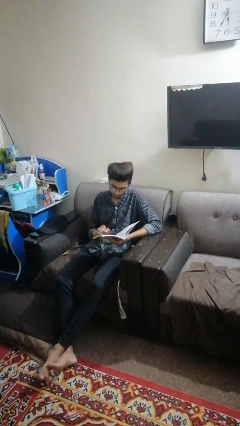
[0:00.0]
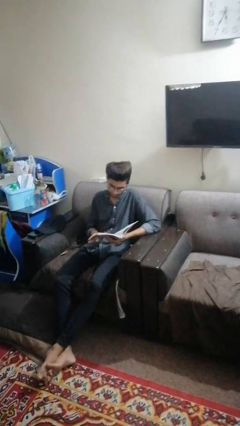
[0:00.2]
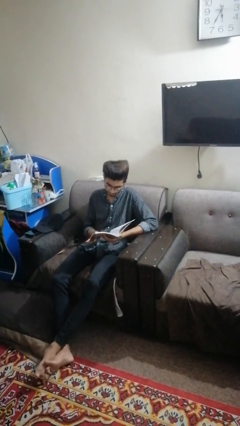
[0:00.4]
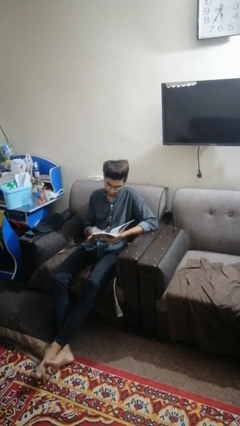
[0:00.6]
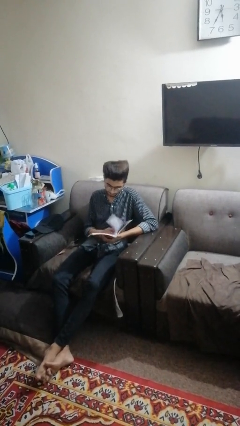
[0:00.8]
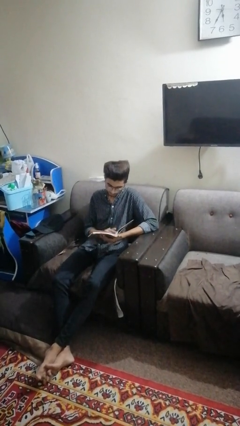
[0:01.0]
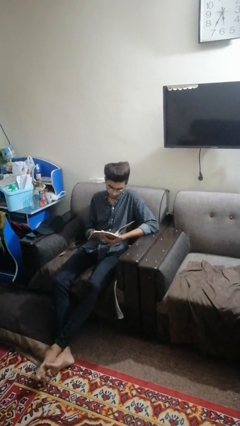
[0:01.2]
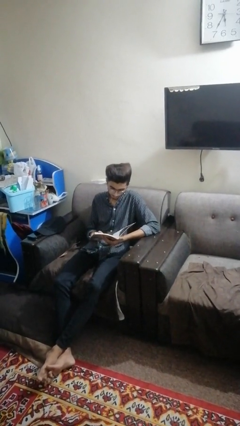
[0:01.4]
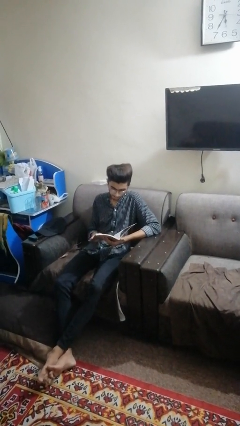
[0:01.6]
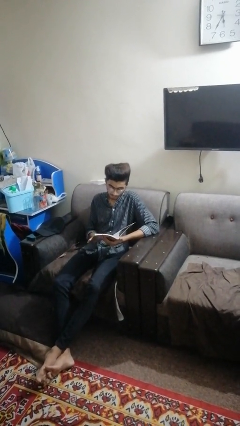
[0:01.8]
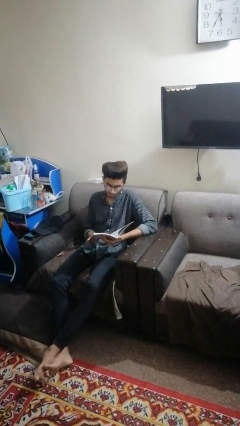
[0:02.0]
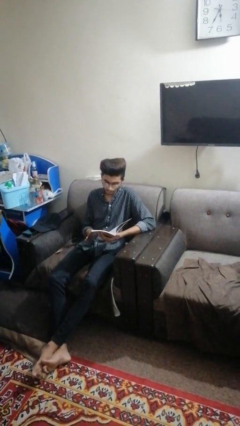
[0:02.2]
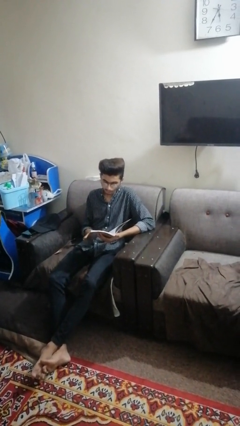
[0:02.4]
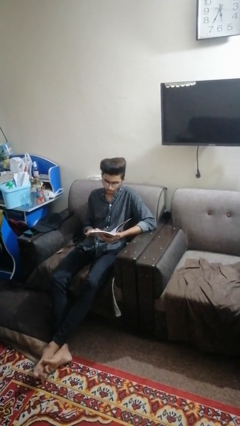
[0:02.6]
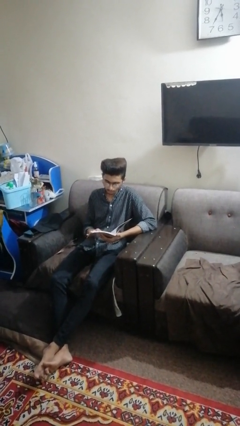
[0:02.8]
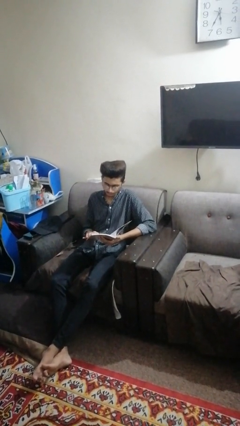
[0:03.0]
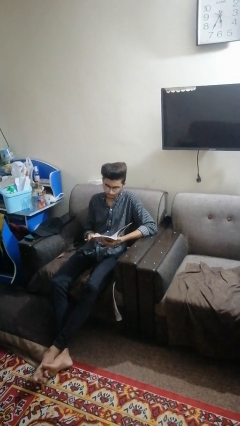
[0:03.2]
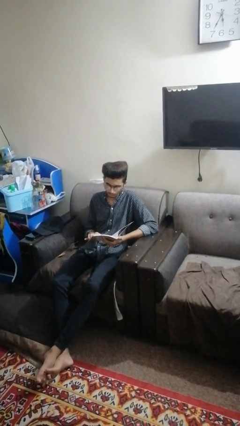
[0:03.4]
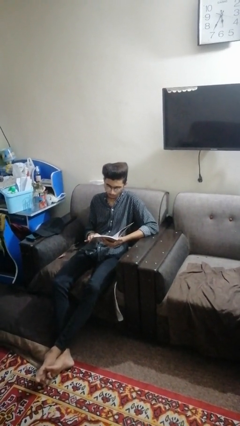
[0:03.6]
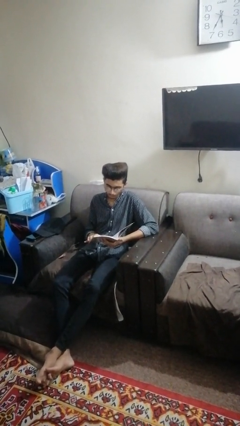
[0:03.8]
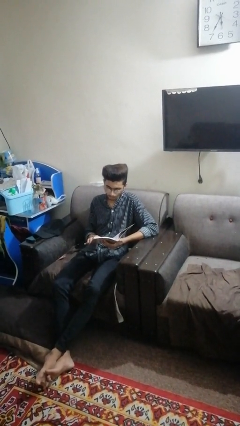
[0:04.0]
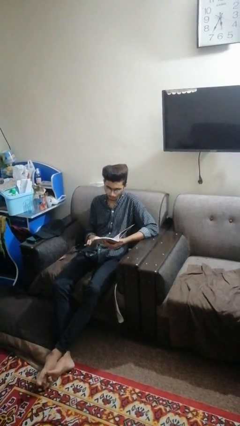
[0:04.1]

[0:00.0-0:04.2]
person reads book

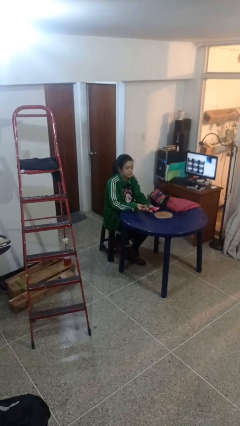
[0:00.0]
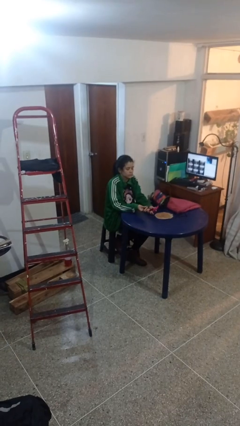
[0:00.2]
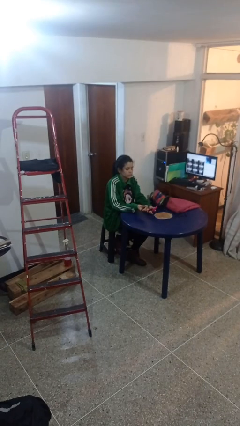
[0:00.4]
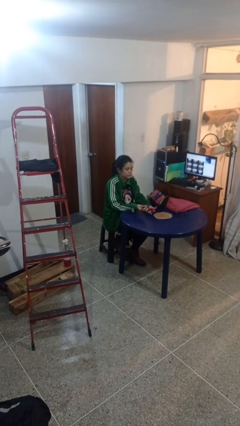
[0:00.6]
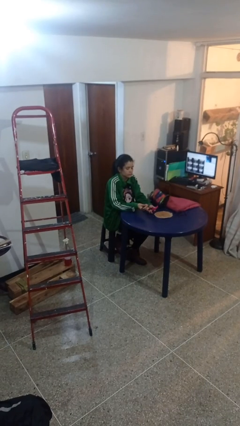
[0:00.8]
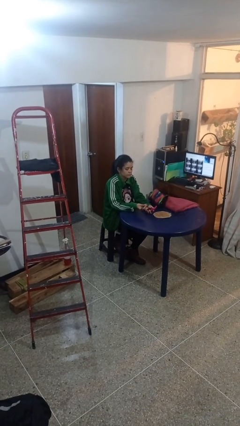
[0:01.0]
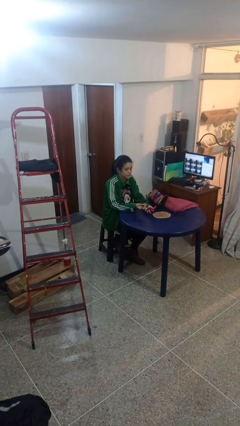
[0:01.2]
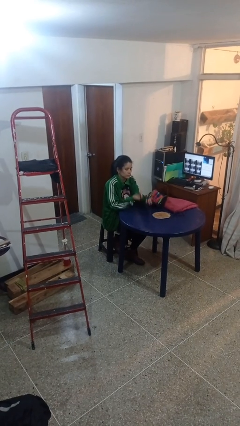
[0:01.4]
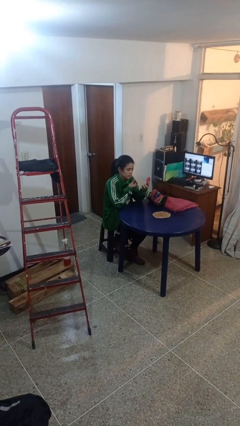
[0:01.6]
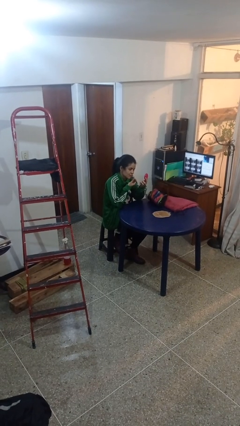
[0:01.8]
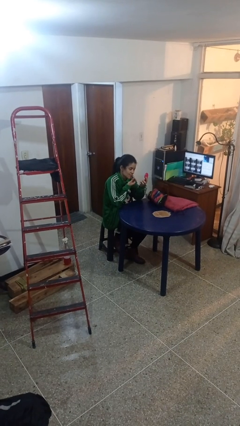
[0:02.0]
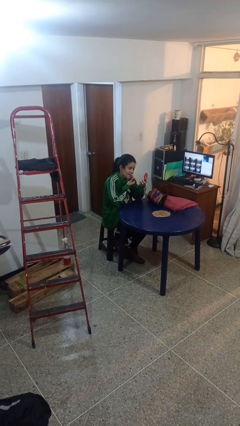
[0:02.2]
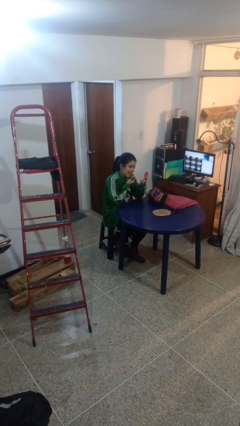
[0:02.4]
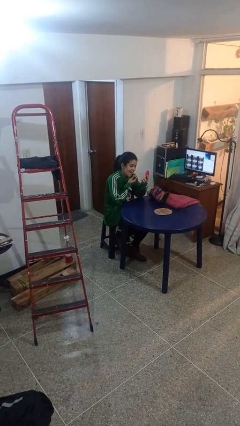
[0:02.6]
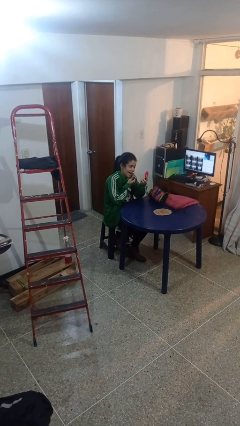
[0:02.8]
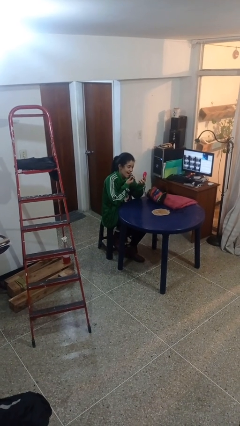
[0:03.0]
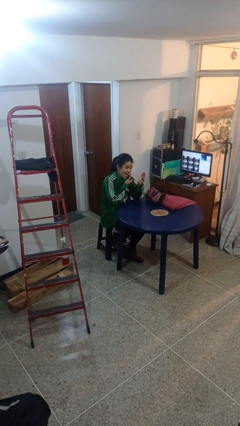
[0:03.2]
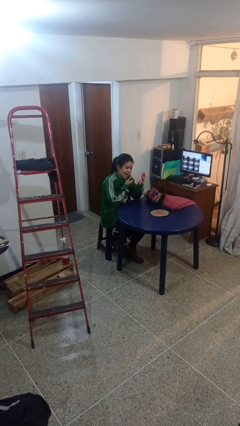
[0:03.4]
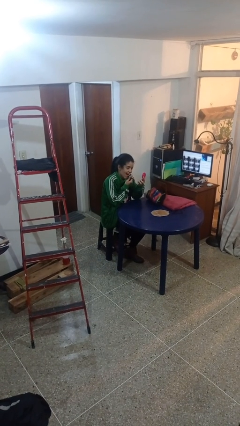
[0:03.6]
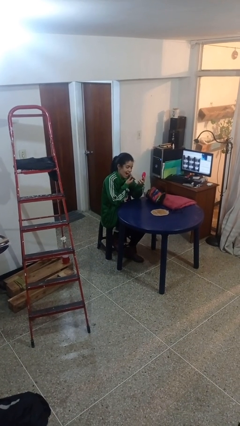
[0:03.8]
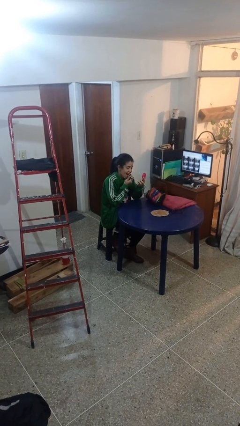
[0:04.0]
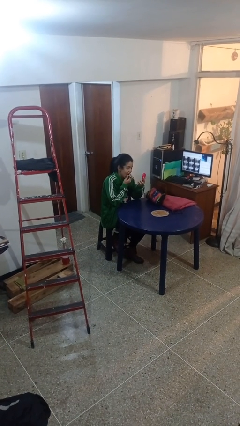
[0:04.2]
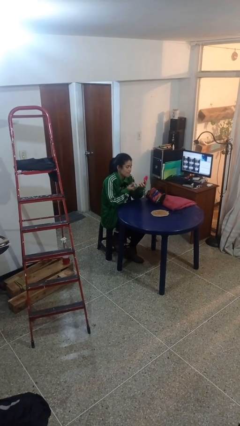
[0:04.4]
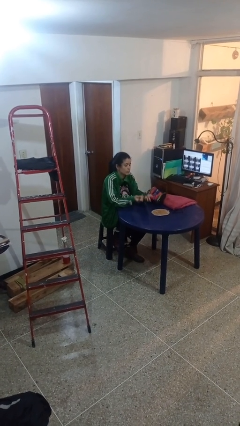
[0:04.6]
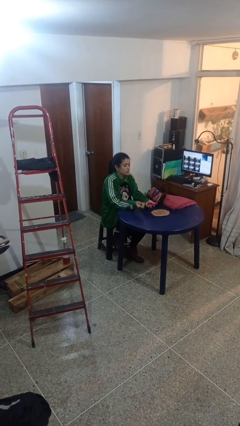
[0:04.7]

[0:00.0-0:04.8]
person applies lip makeup

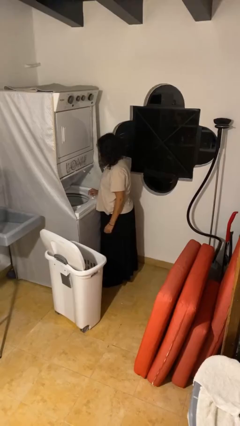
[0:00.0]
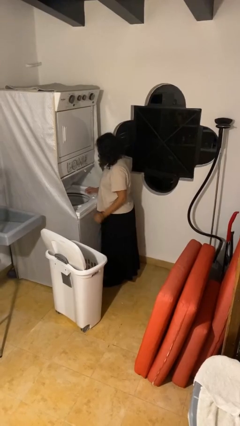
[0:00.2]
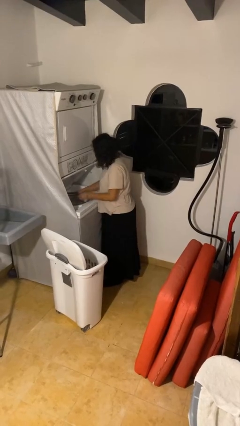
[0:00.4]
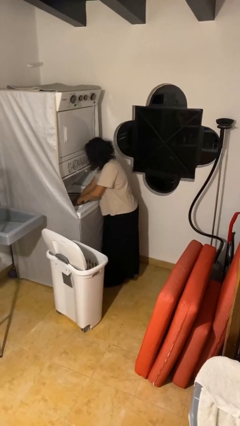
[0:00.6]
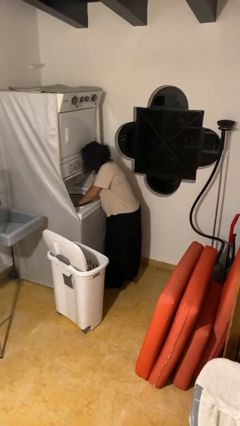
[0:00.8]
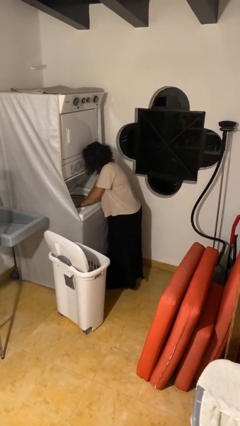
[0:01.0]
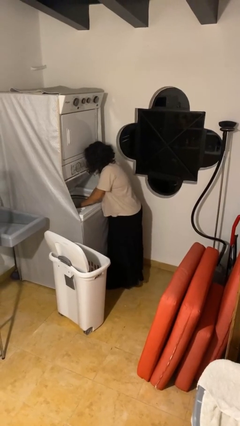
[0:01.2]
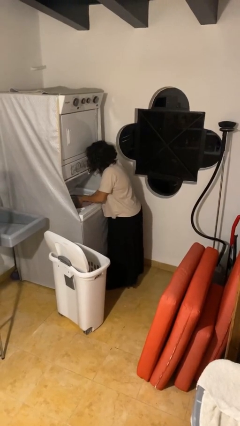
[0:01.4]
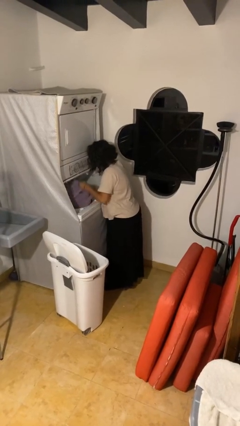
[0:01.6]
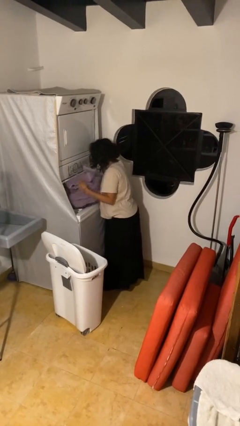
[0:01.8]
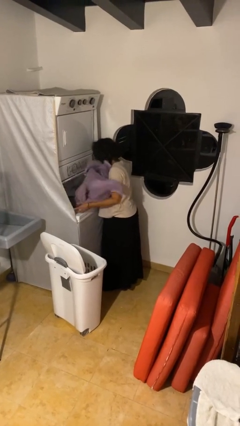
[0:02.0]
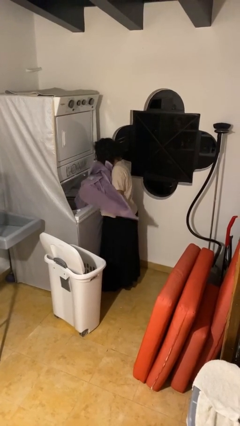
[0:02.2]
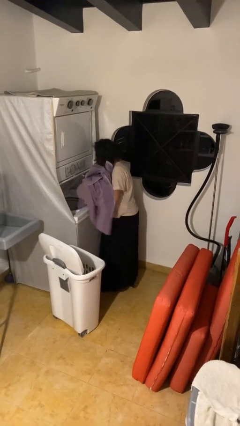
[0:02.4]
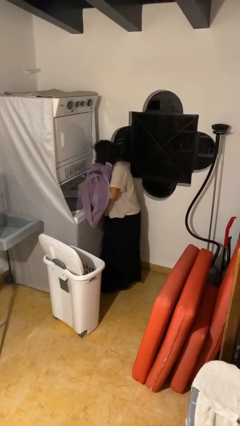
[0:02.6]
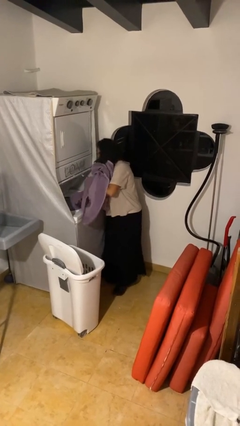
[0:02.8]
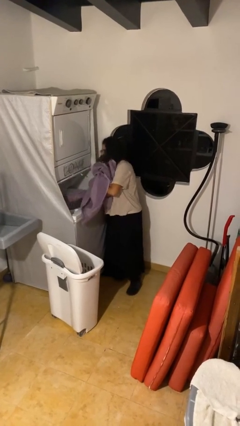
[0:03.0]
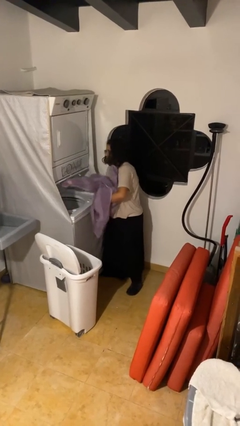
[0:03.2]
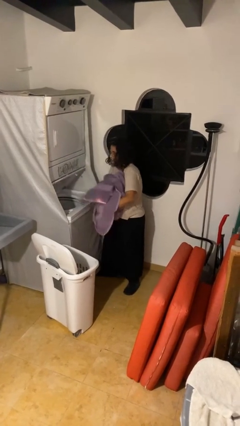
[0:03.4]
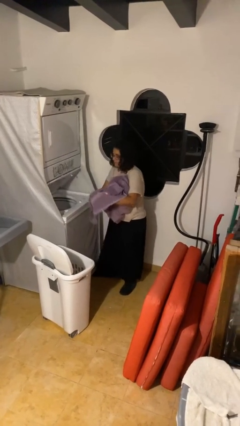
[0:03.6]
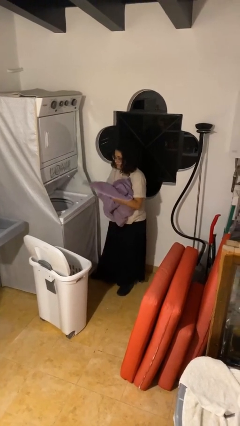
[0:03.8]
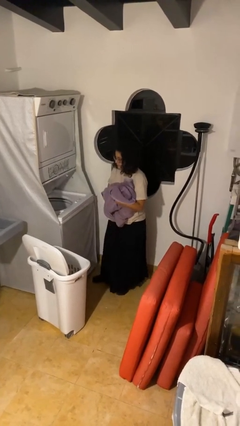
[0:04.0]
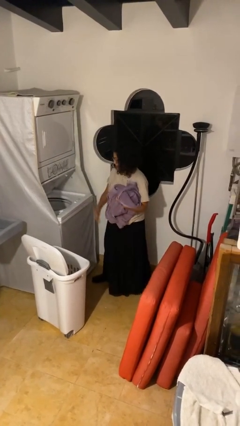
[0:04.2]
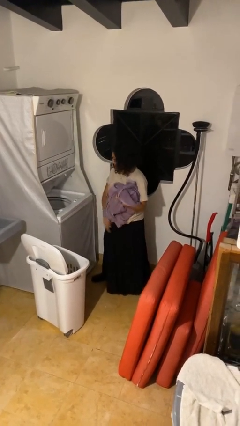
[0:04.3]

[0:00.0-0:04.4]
person unloads clotheswasher

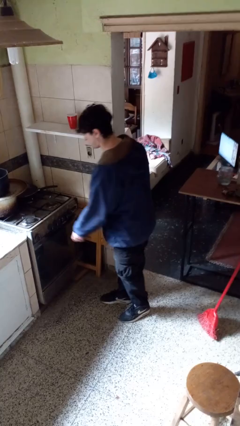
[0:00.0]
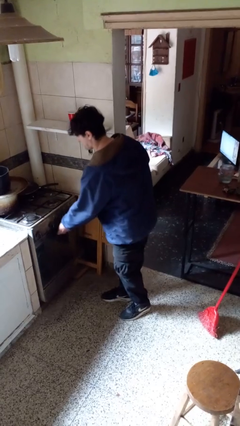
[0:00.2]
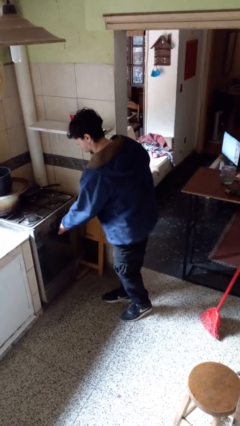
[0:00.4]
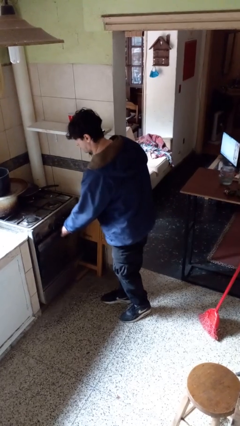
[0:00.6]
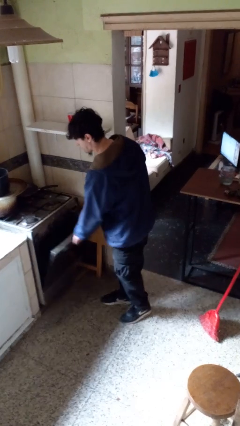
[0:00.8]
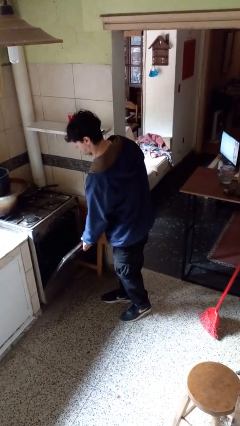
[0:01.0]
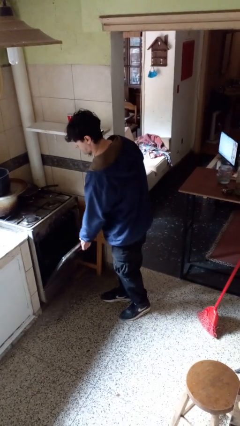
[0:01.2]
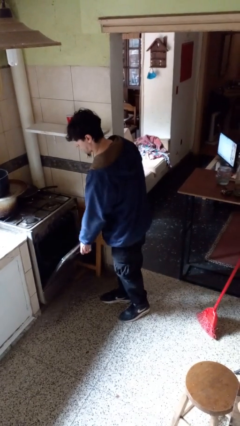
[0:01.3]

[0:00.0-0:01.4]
person opens oven door

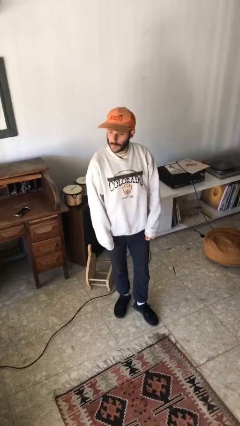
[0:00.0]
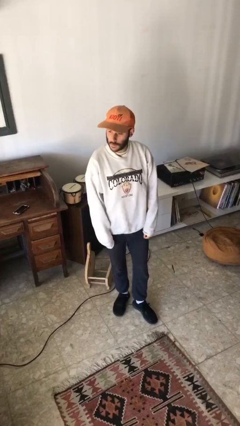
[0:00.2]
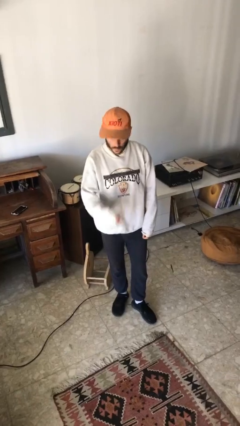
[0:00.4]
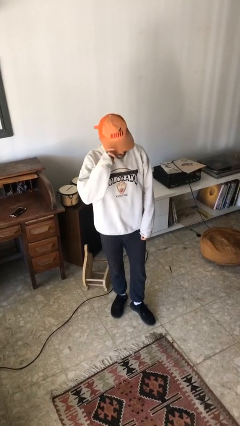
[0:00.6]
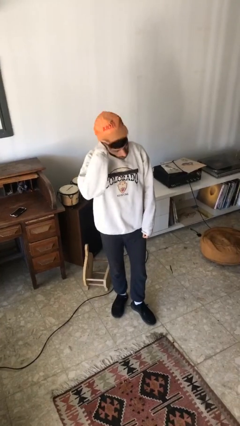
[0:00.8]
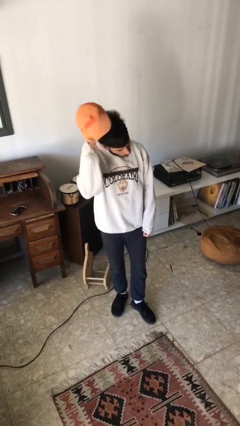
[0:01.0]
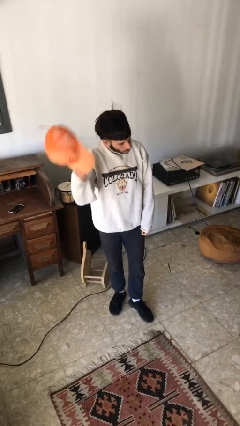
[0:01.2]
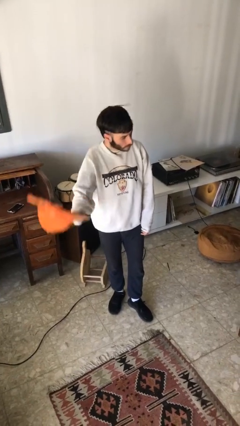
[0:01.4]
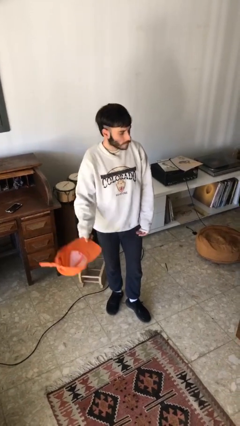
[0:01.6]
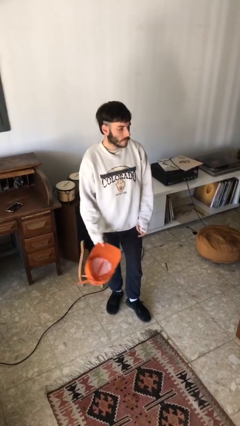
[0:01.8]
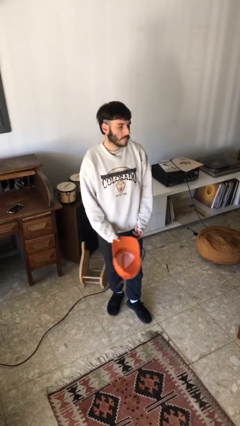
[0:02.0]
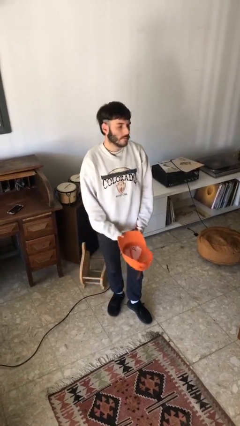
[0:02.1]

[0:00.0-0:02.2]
person takes off hat

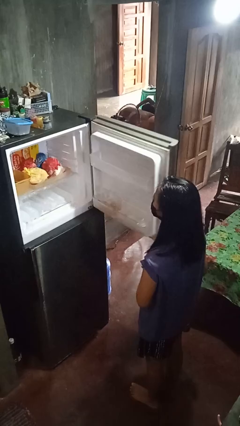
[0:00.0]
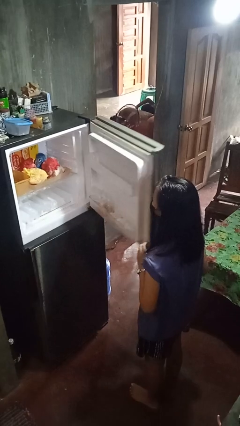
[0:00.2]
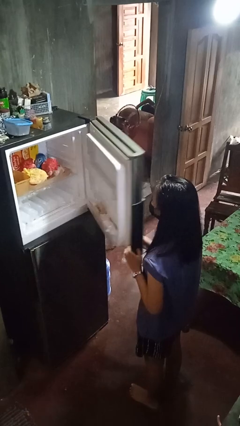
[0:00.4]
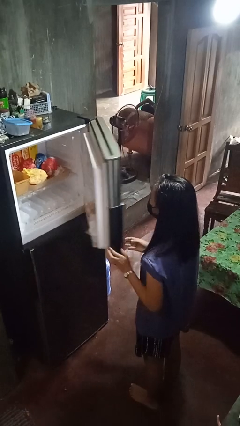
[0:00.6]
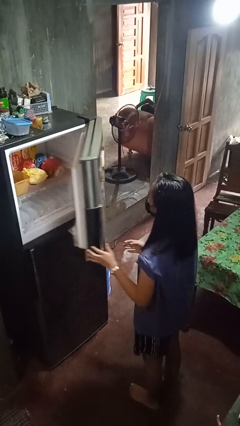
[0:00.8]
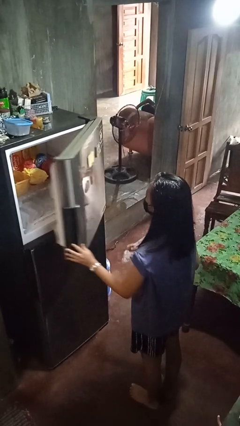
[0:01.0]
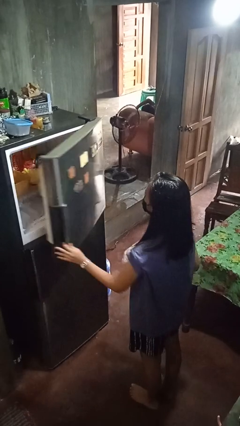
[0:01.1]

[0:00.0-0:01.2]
person closes refrigerator
